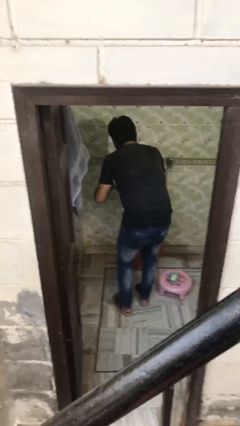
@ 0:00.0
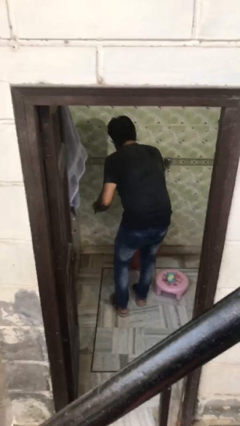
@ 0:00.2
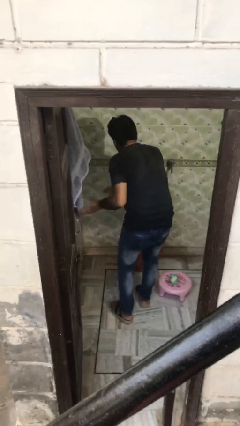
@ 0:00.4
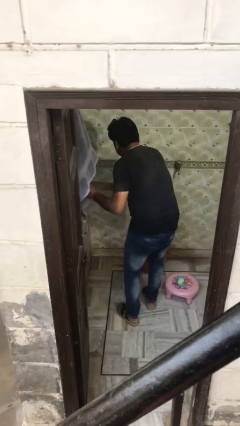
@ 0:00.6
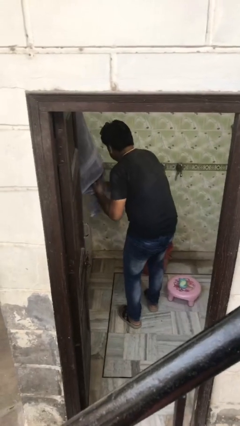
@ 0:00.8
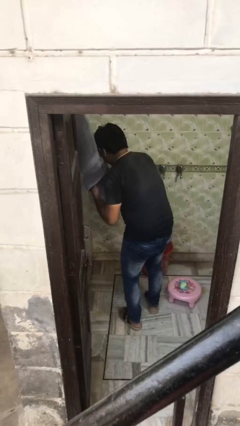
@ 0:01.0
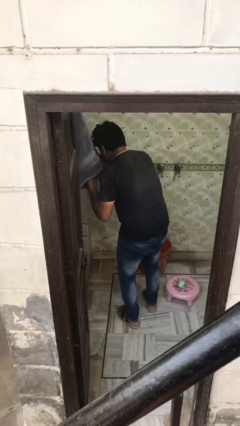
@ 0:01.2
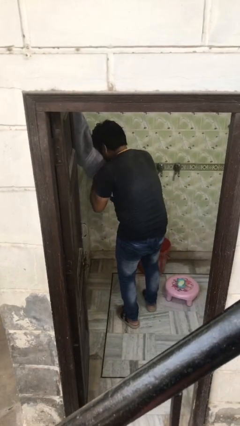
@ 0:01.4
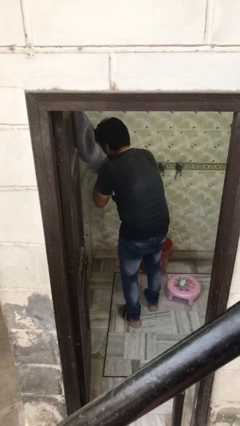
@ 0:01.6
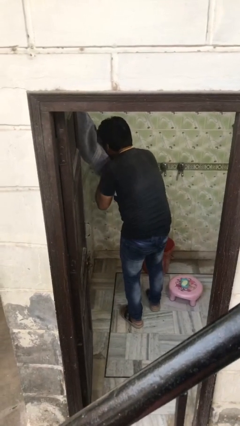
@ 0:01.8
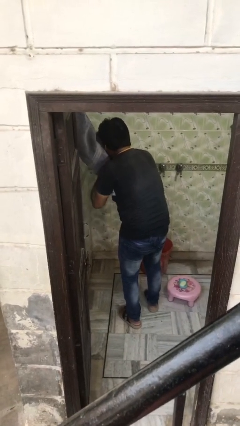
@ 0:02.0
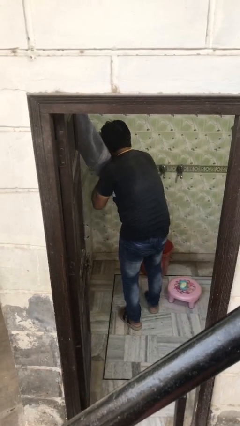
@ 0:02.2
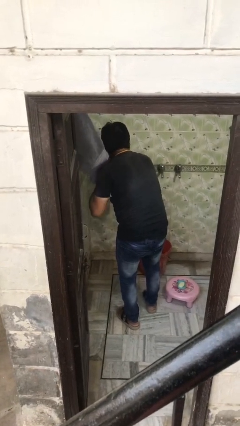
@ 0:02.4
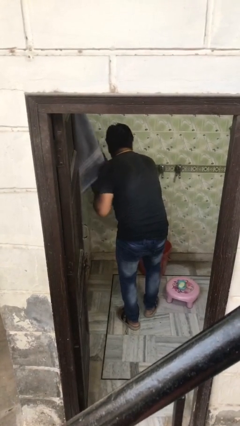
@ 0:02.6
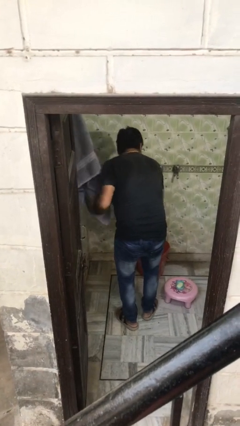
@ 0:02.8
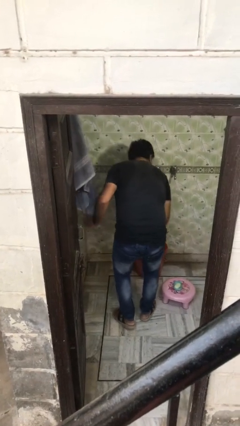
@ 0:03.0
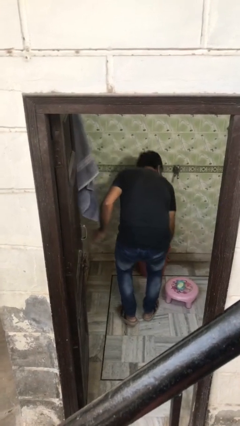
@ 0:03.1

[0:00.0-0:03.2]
person dries face with towel

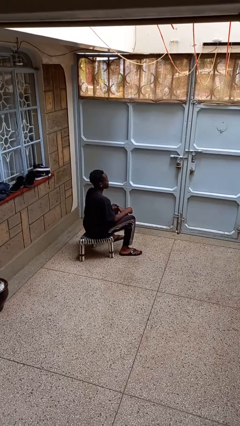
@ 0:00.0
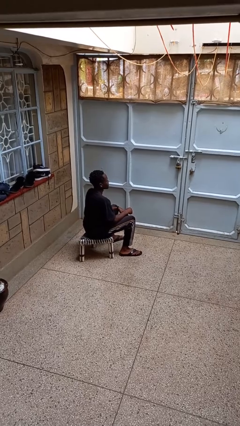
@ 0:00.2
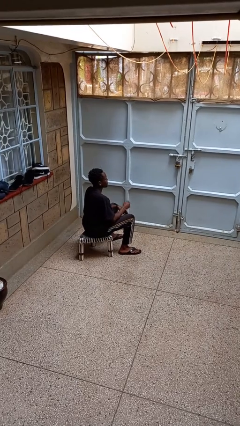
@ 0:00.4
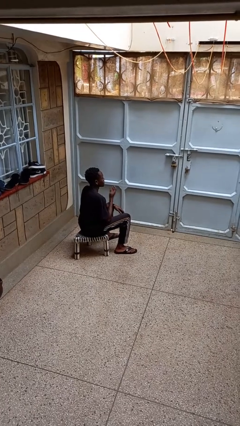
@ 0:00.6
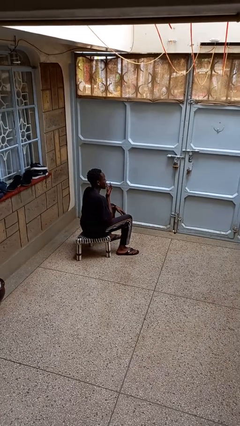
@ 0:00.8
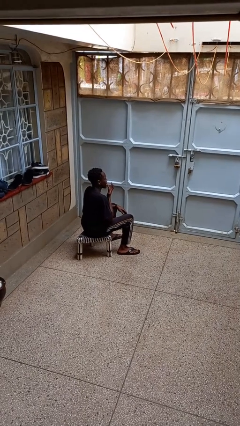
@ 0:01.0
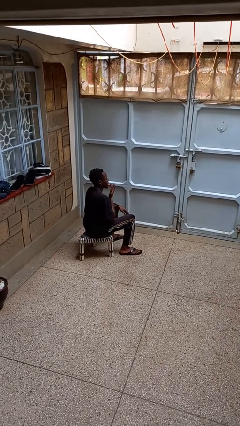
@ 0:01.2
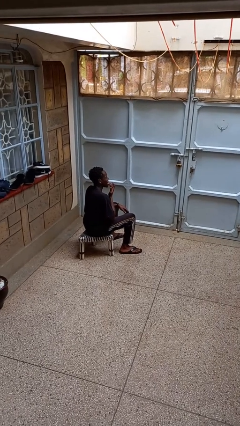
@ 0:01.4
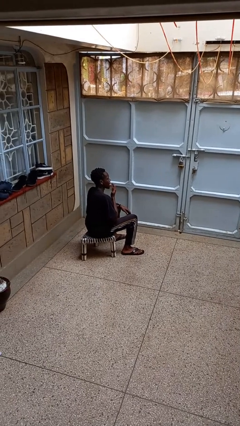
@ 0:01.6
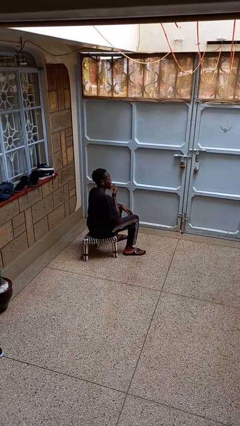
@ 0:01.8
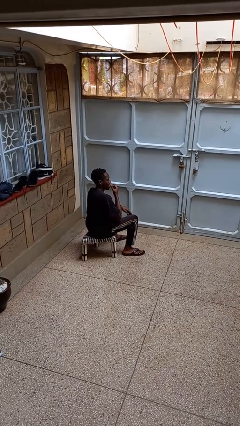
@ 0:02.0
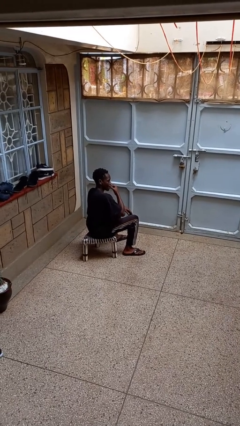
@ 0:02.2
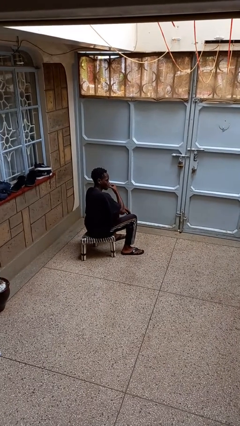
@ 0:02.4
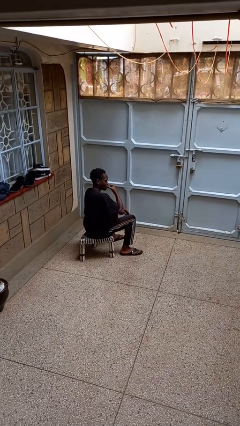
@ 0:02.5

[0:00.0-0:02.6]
person licks fingers

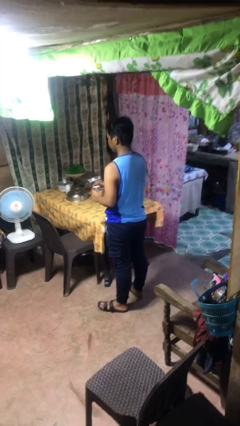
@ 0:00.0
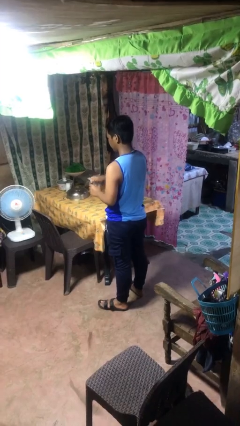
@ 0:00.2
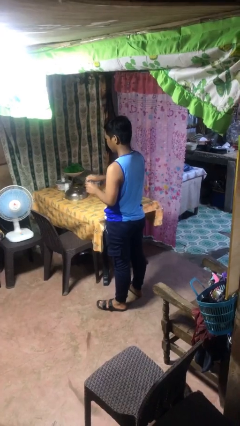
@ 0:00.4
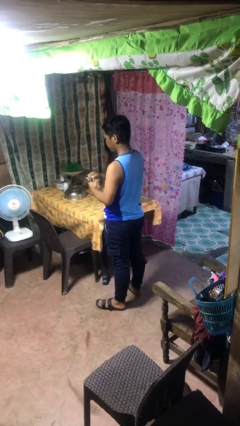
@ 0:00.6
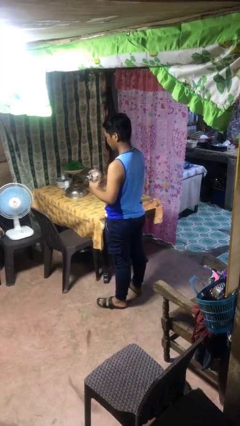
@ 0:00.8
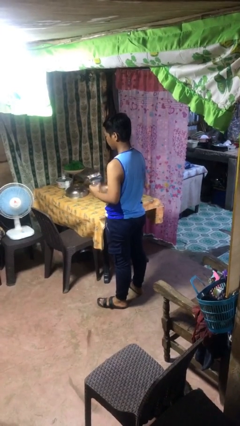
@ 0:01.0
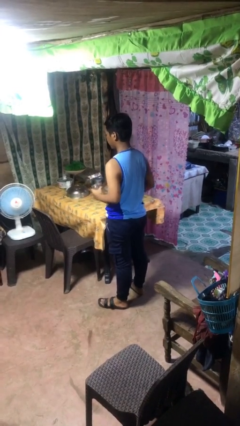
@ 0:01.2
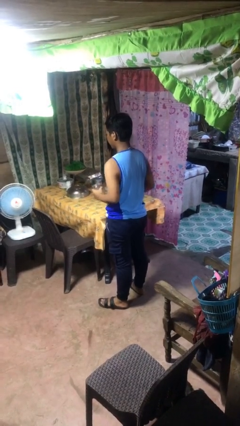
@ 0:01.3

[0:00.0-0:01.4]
person opens jar

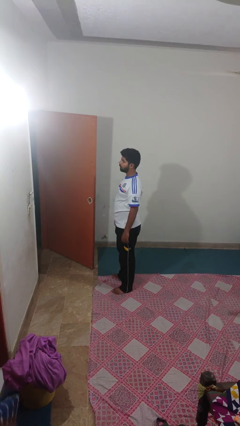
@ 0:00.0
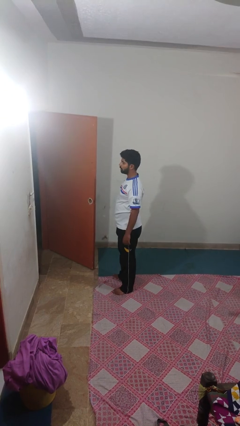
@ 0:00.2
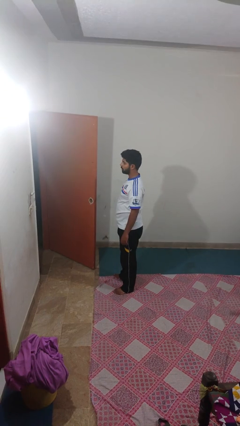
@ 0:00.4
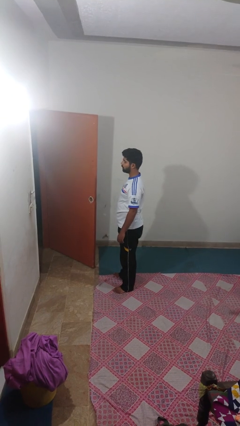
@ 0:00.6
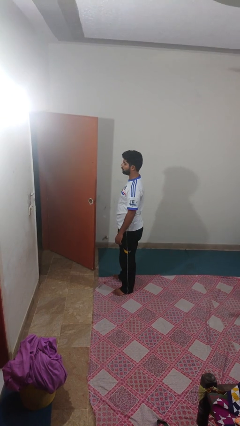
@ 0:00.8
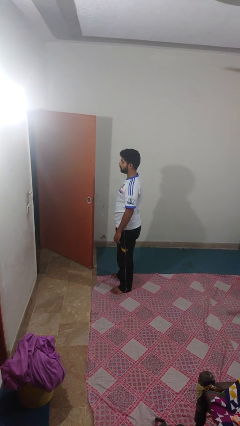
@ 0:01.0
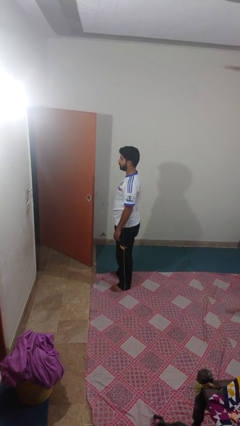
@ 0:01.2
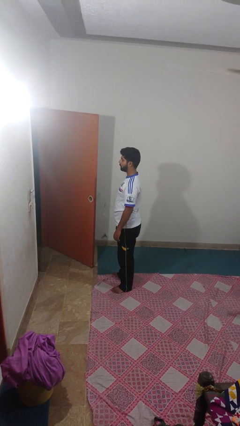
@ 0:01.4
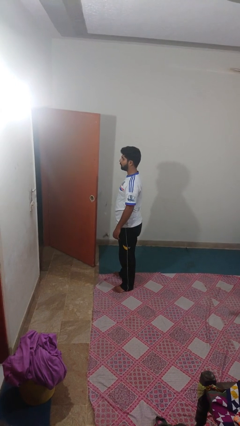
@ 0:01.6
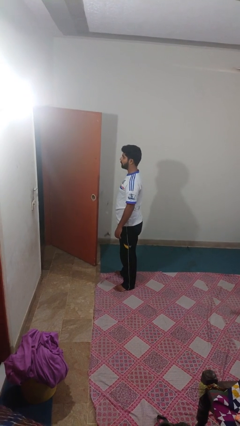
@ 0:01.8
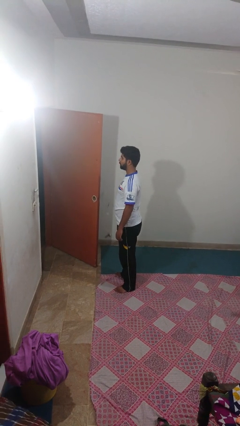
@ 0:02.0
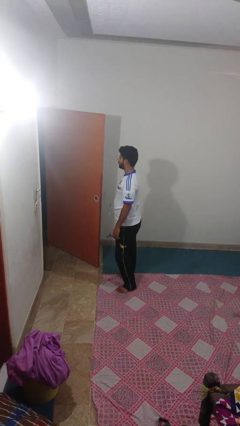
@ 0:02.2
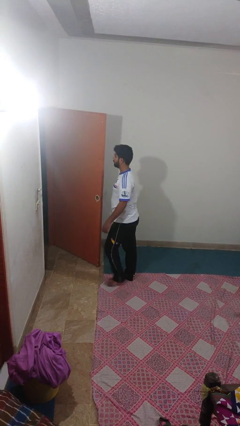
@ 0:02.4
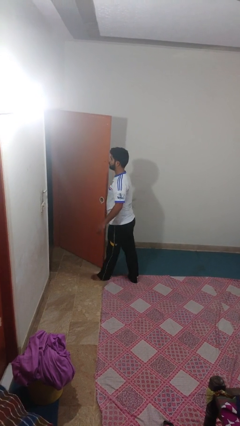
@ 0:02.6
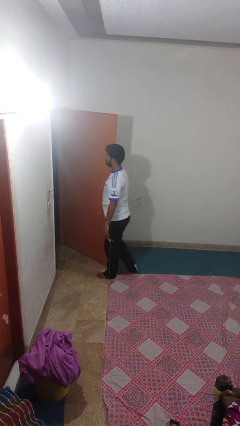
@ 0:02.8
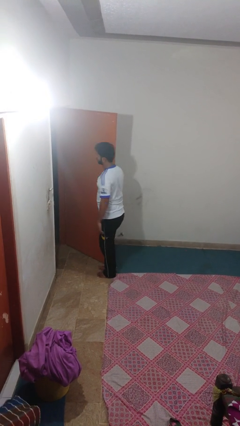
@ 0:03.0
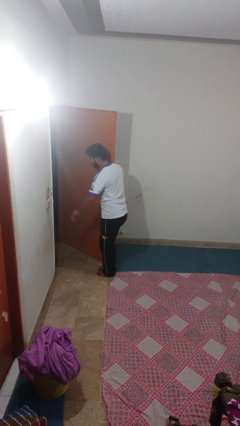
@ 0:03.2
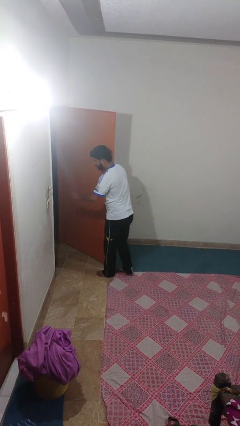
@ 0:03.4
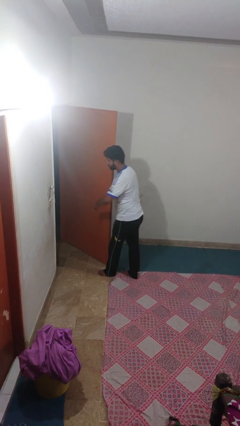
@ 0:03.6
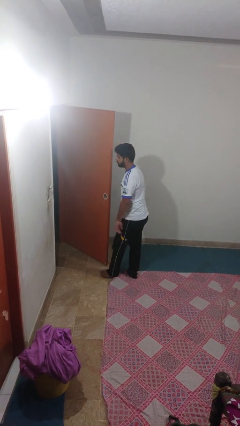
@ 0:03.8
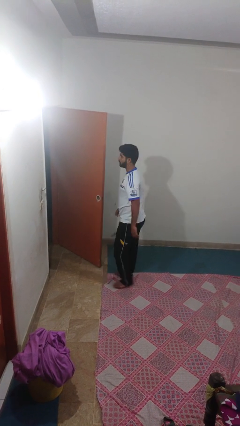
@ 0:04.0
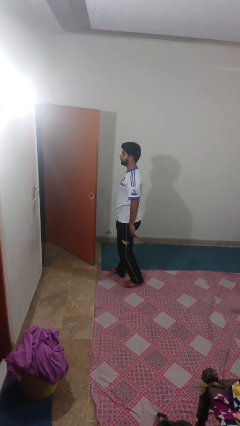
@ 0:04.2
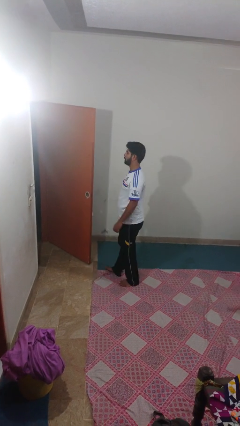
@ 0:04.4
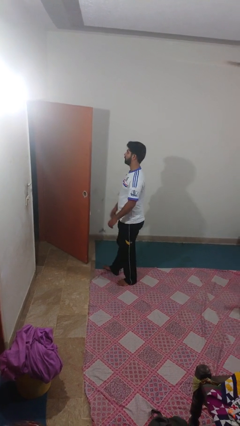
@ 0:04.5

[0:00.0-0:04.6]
person bumps into wall

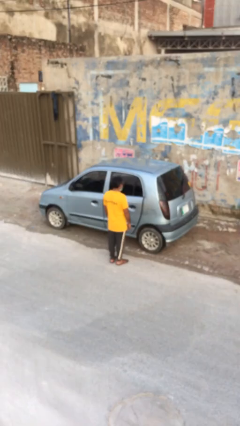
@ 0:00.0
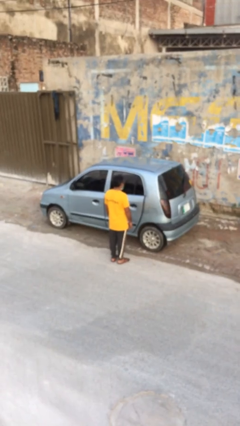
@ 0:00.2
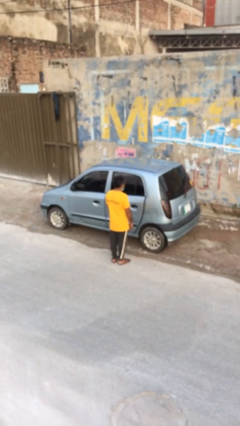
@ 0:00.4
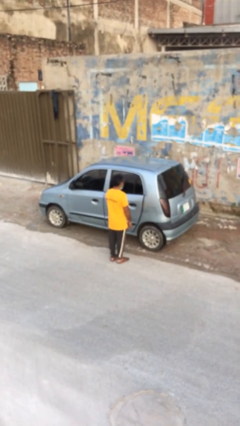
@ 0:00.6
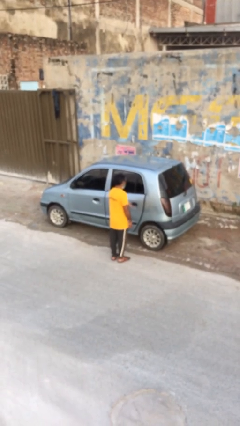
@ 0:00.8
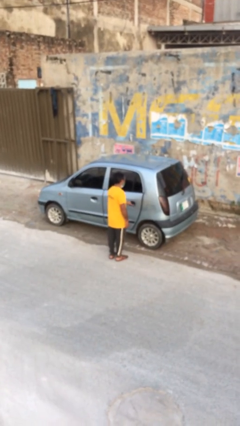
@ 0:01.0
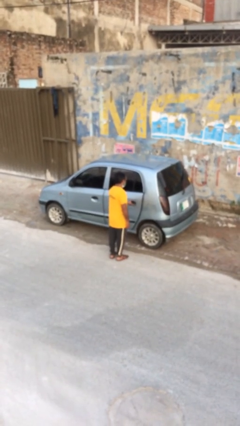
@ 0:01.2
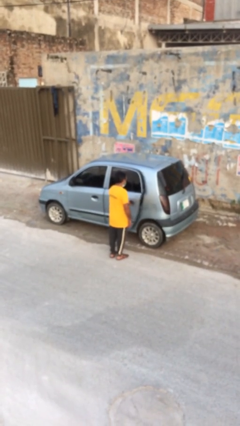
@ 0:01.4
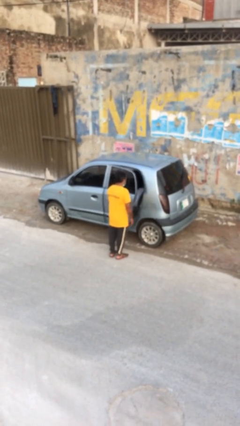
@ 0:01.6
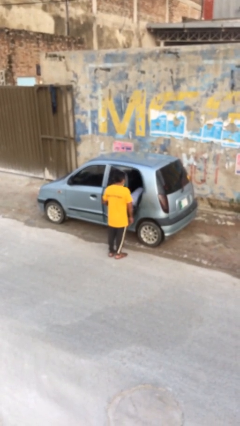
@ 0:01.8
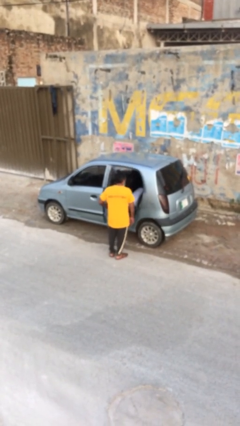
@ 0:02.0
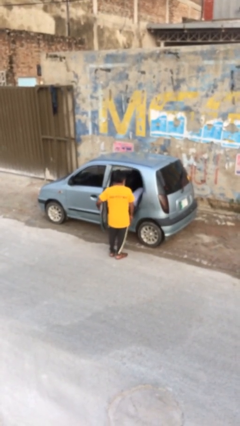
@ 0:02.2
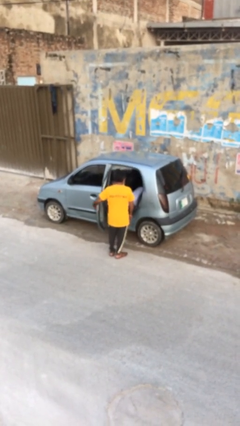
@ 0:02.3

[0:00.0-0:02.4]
person opens car door

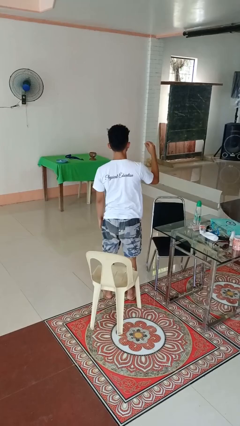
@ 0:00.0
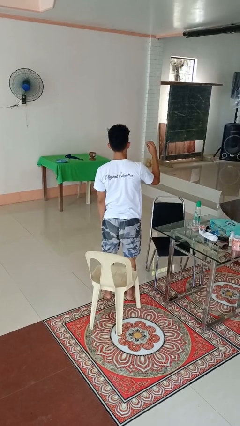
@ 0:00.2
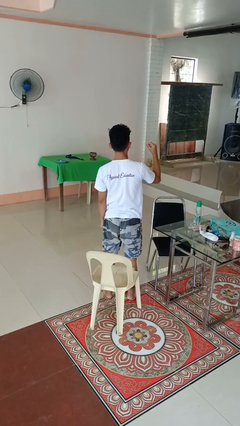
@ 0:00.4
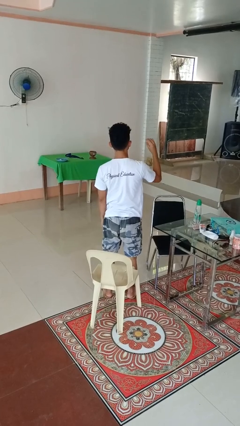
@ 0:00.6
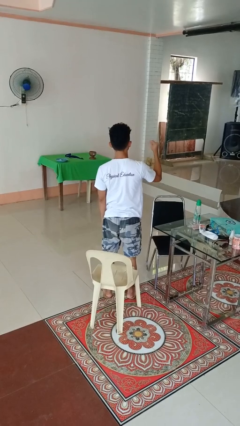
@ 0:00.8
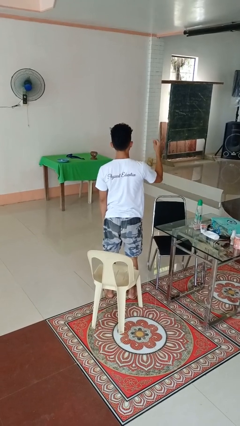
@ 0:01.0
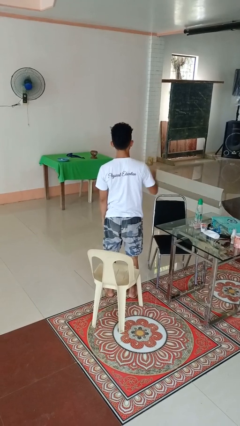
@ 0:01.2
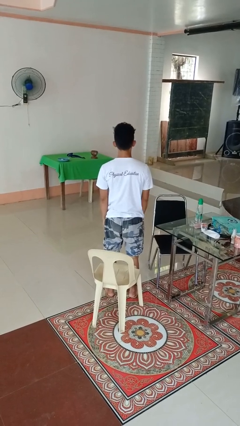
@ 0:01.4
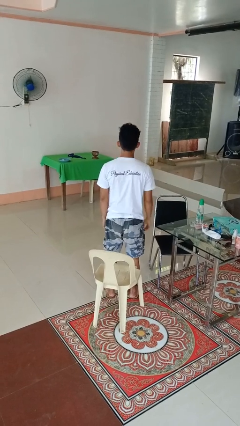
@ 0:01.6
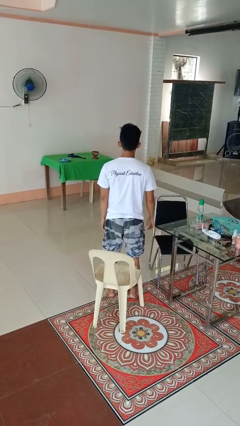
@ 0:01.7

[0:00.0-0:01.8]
person snaps fingers

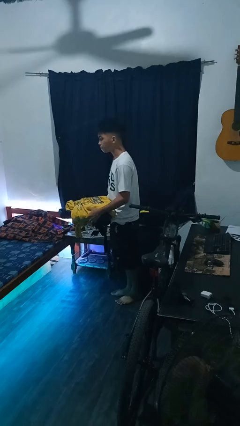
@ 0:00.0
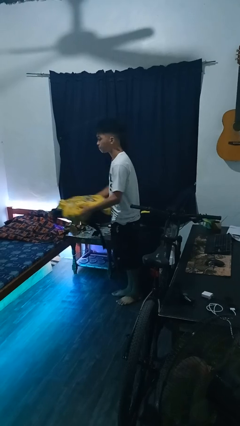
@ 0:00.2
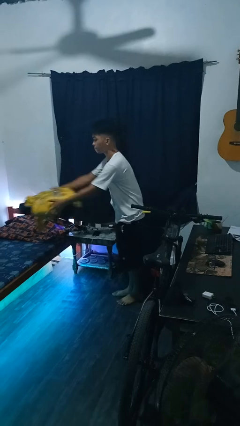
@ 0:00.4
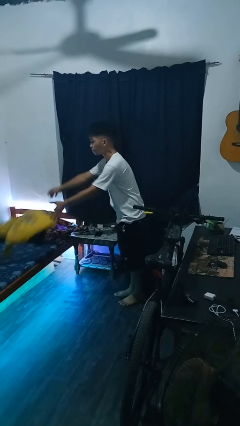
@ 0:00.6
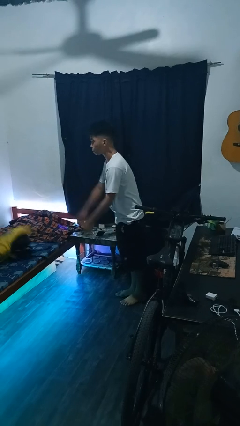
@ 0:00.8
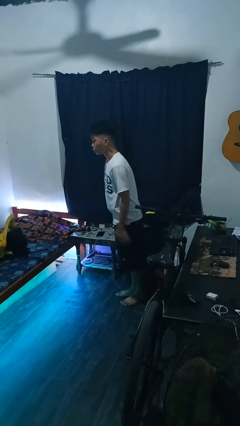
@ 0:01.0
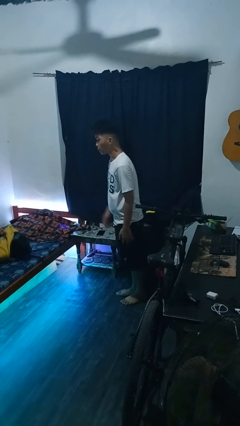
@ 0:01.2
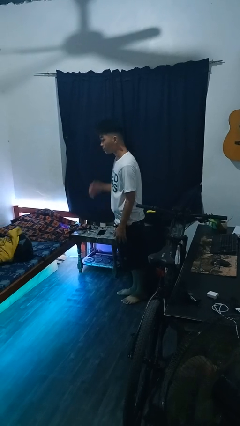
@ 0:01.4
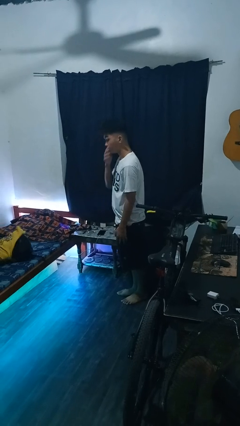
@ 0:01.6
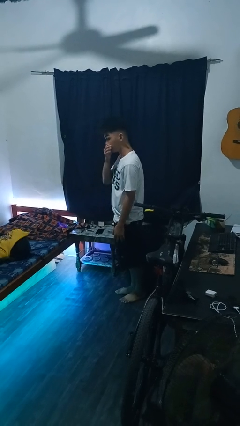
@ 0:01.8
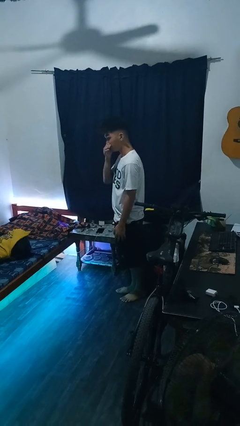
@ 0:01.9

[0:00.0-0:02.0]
person throws object on bed
